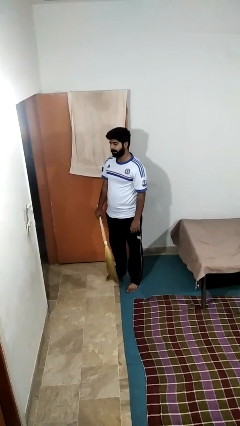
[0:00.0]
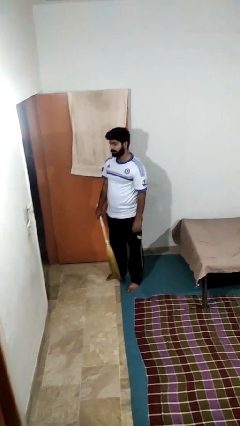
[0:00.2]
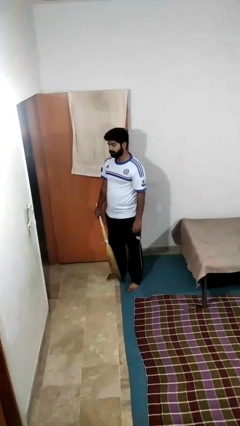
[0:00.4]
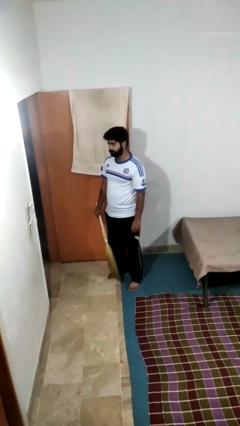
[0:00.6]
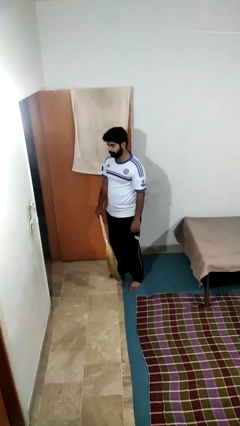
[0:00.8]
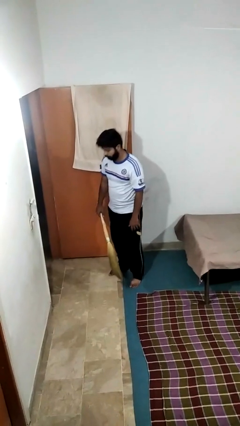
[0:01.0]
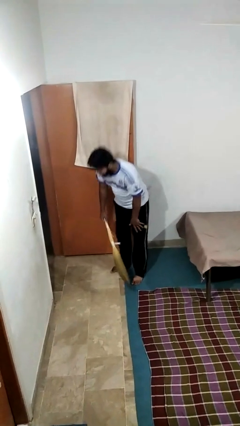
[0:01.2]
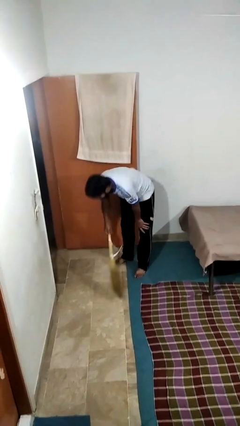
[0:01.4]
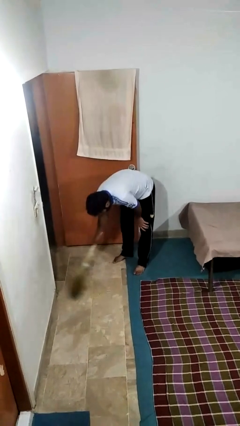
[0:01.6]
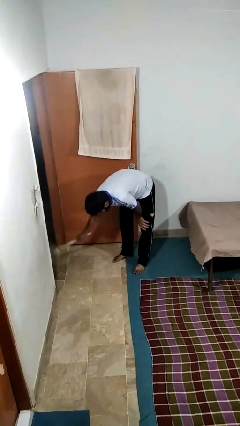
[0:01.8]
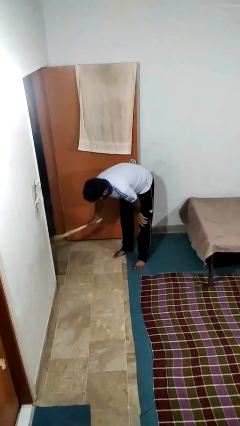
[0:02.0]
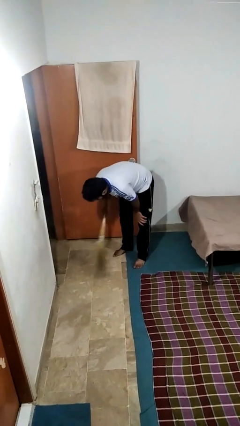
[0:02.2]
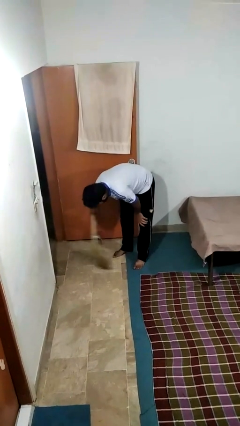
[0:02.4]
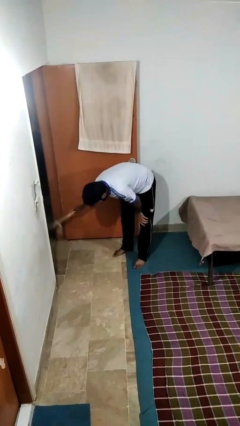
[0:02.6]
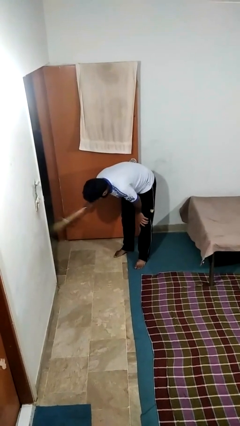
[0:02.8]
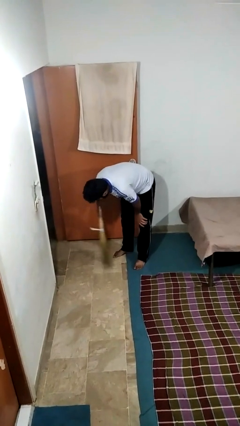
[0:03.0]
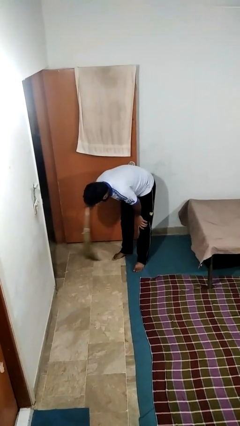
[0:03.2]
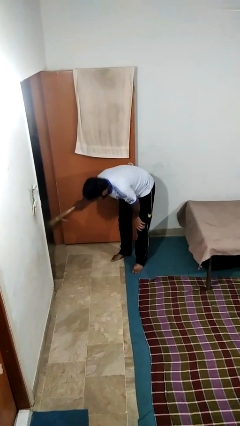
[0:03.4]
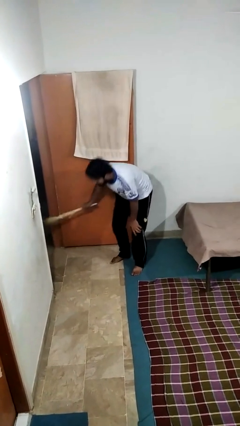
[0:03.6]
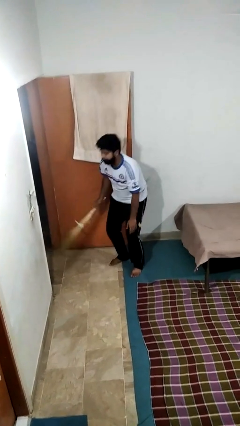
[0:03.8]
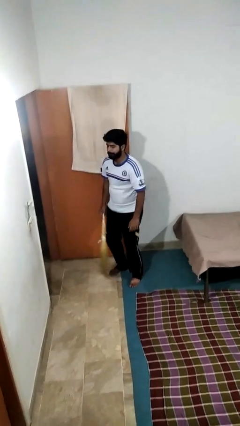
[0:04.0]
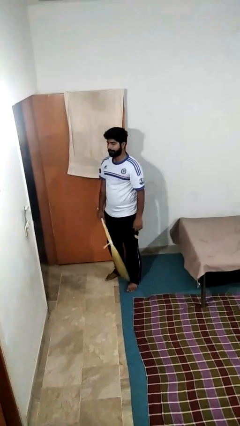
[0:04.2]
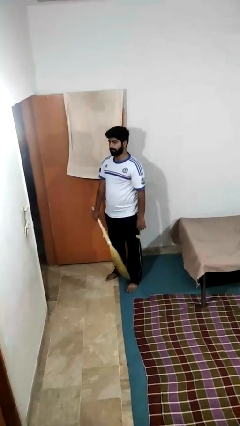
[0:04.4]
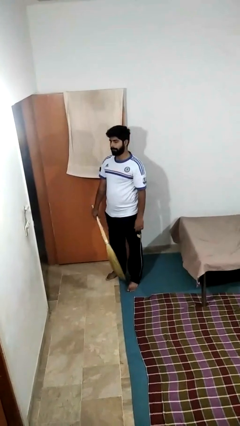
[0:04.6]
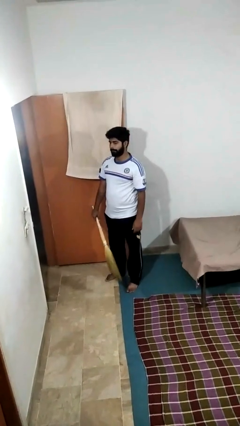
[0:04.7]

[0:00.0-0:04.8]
person sweeps floor

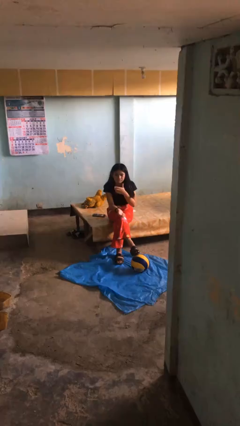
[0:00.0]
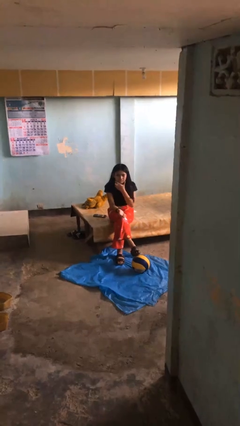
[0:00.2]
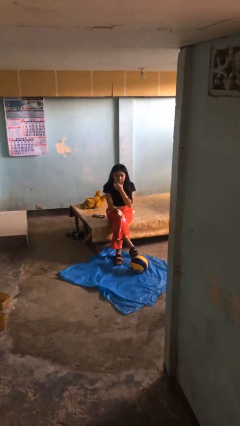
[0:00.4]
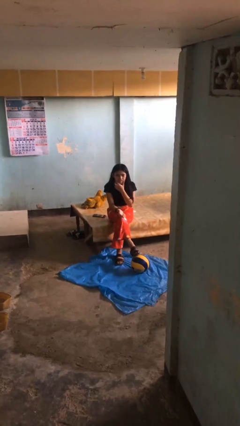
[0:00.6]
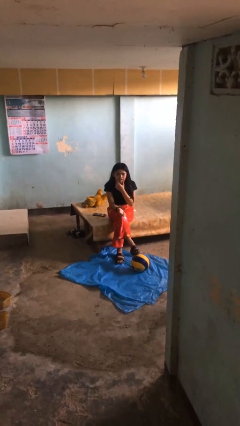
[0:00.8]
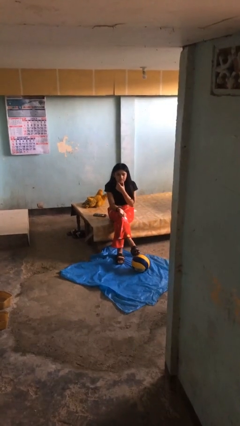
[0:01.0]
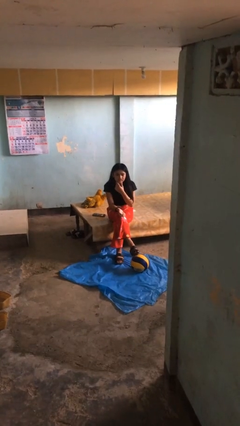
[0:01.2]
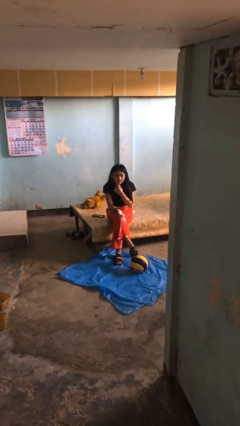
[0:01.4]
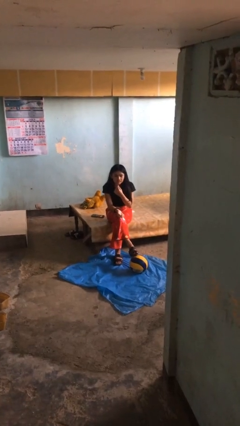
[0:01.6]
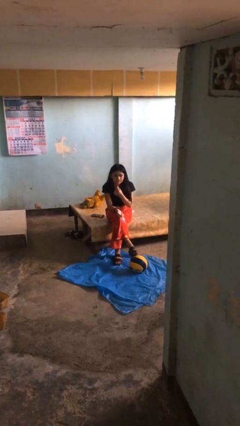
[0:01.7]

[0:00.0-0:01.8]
person strokes chin

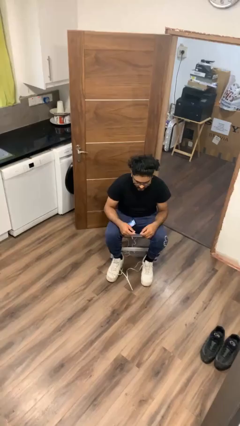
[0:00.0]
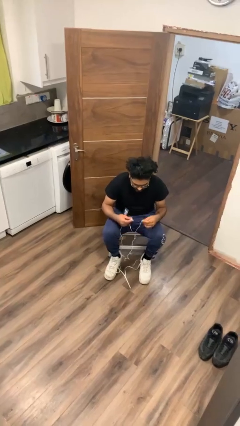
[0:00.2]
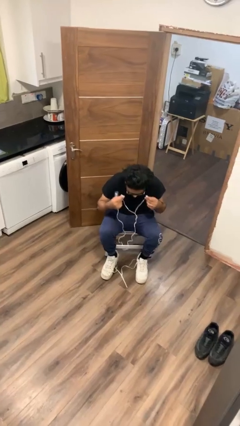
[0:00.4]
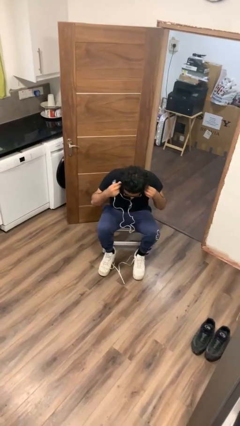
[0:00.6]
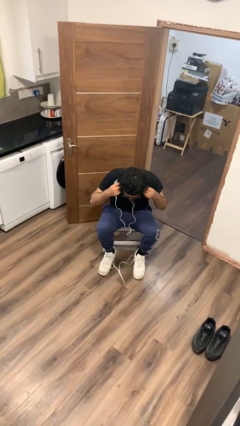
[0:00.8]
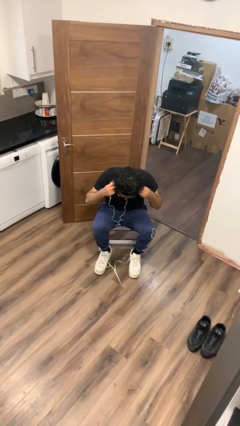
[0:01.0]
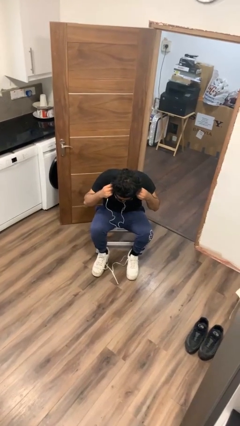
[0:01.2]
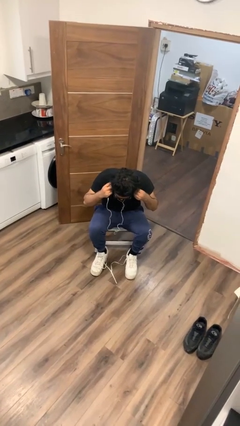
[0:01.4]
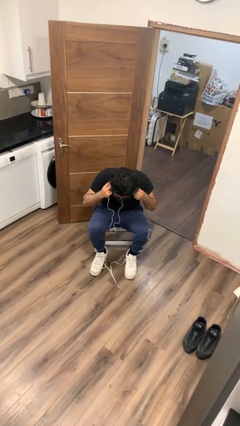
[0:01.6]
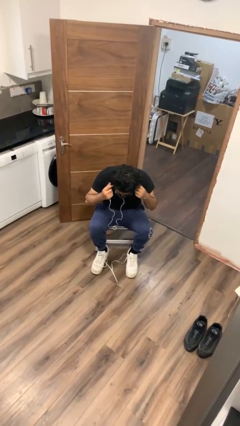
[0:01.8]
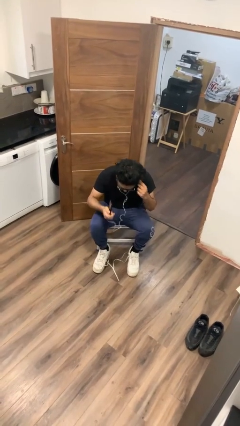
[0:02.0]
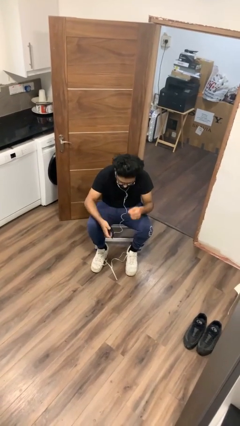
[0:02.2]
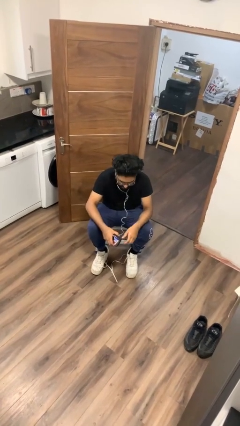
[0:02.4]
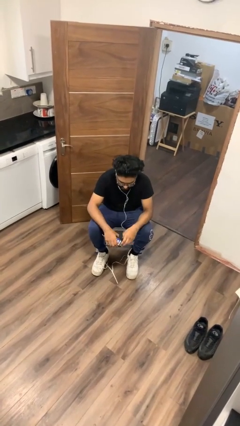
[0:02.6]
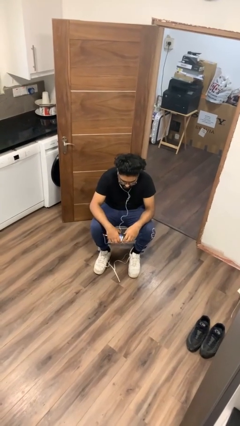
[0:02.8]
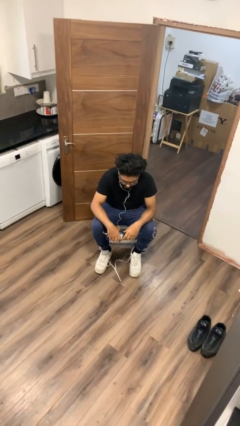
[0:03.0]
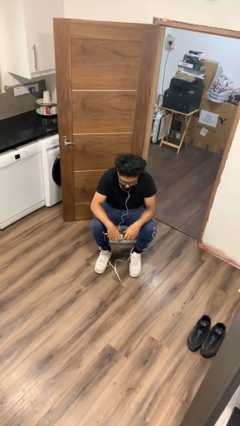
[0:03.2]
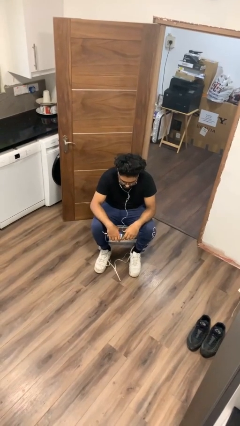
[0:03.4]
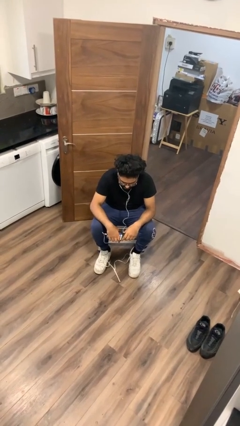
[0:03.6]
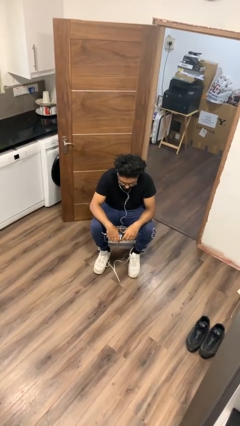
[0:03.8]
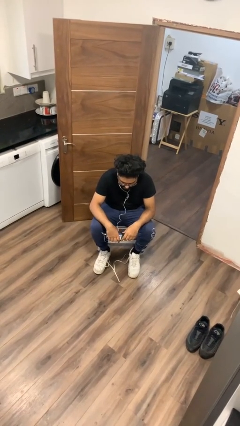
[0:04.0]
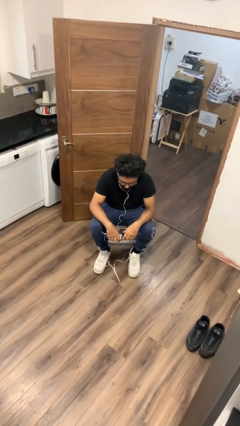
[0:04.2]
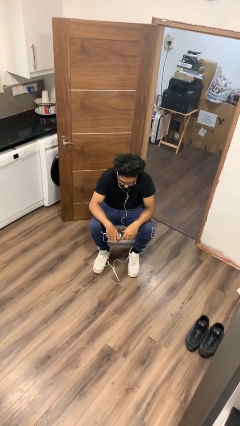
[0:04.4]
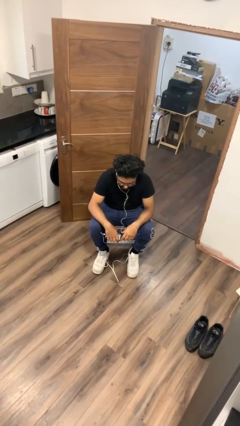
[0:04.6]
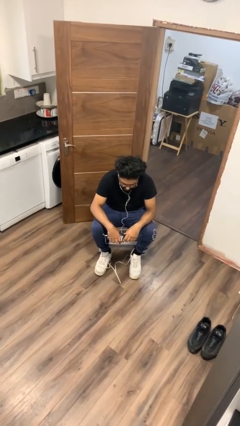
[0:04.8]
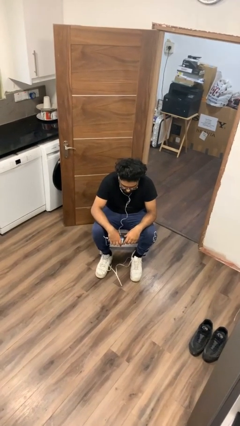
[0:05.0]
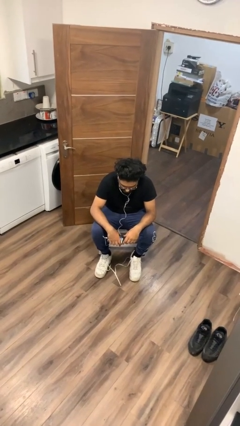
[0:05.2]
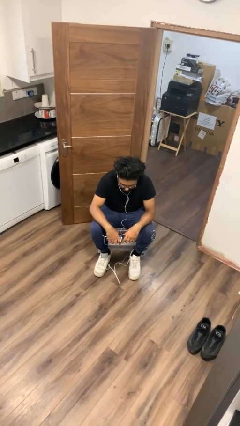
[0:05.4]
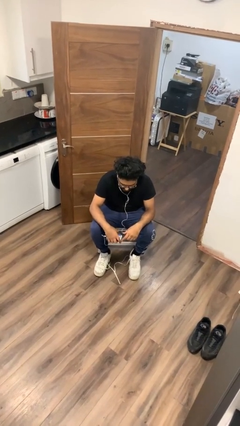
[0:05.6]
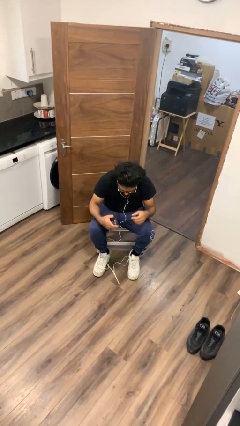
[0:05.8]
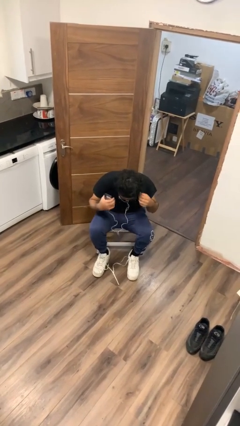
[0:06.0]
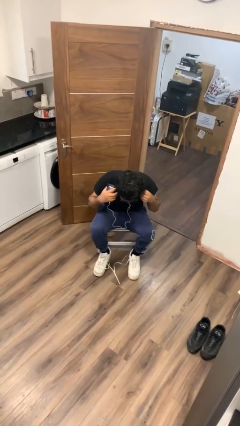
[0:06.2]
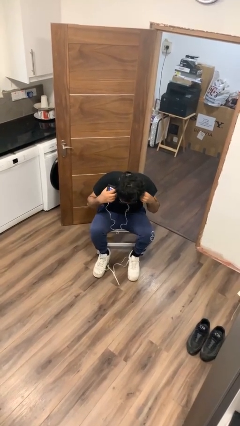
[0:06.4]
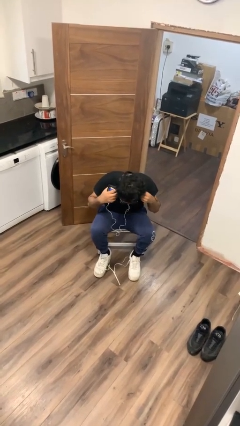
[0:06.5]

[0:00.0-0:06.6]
person puts on headphones

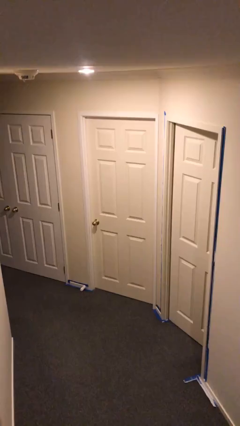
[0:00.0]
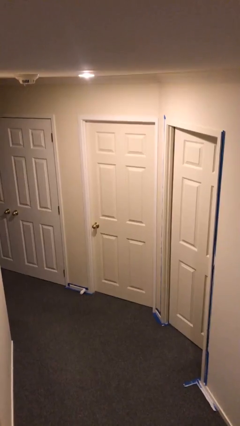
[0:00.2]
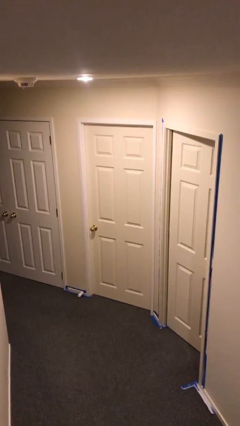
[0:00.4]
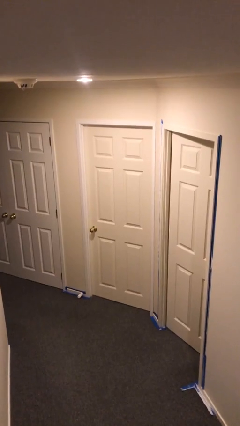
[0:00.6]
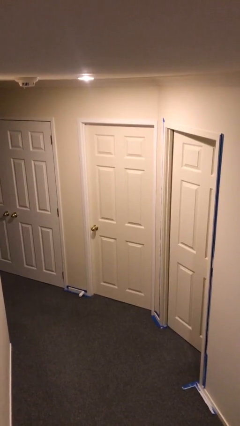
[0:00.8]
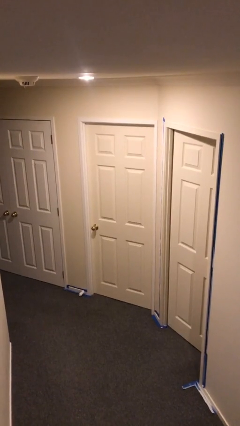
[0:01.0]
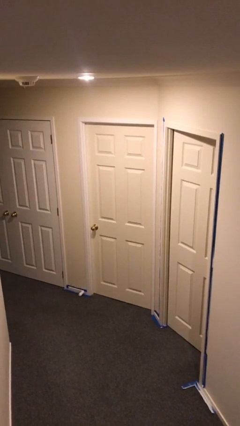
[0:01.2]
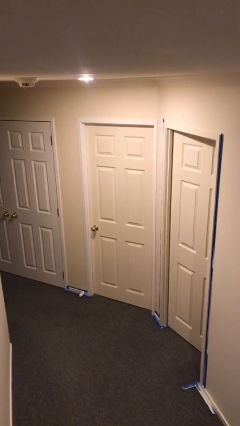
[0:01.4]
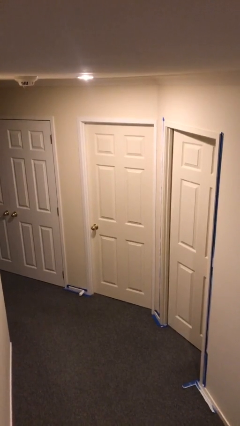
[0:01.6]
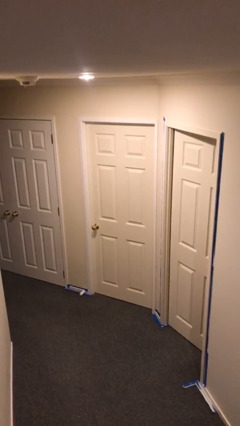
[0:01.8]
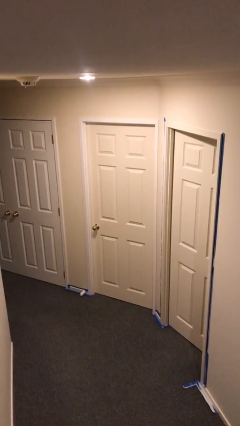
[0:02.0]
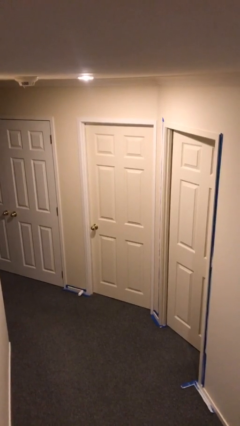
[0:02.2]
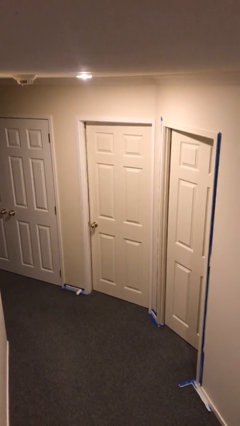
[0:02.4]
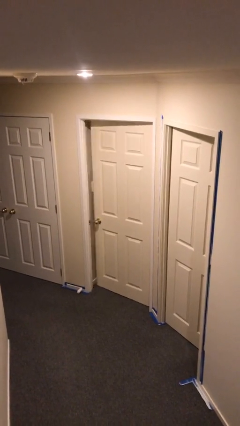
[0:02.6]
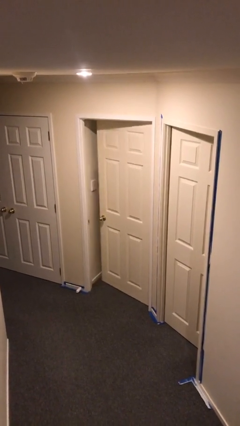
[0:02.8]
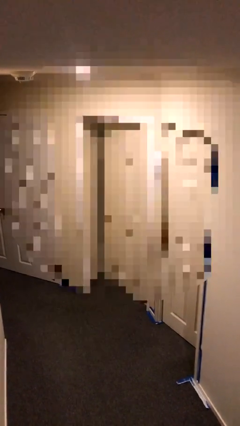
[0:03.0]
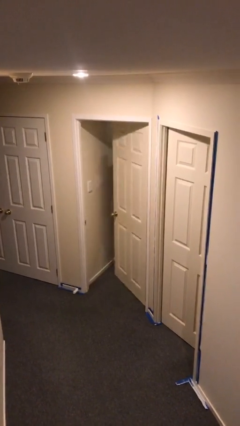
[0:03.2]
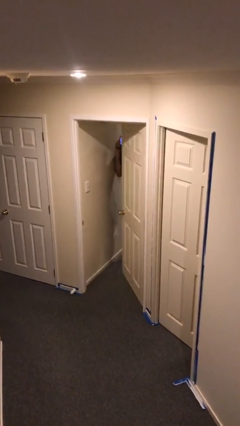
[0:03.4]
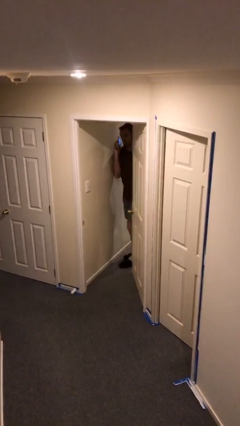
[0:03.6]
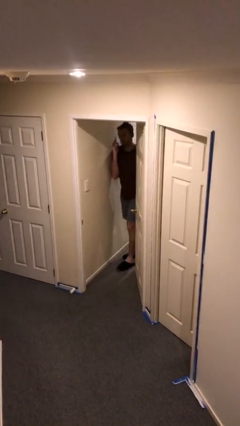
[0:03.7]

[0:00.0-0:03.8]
person opens facility door

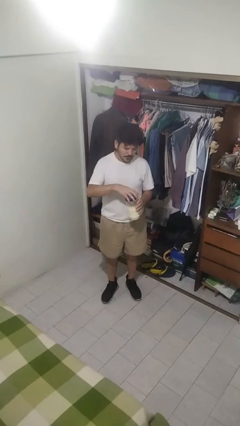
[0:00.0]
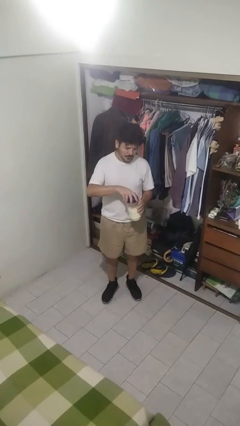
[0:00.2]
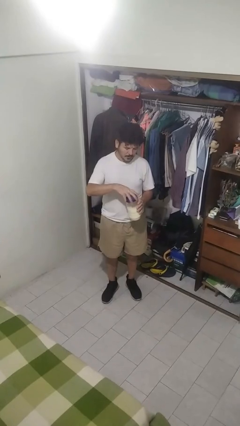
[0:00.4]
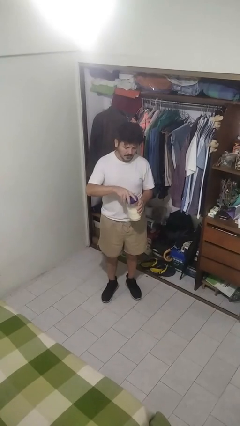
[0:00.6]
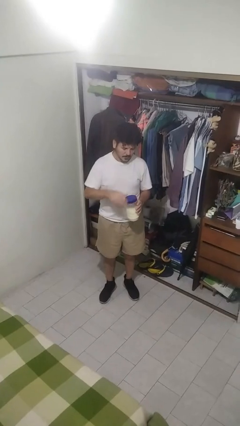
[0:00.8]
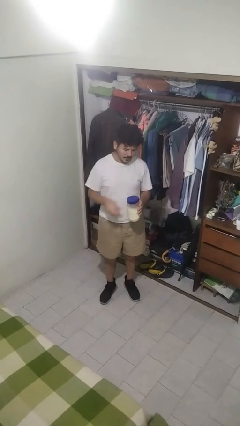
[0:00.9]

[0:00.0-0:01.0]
person closes jar
